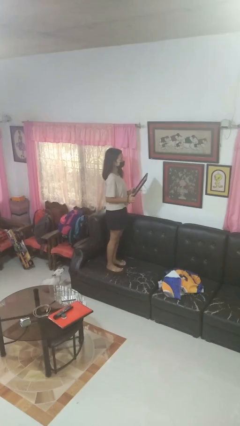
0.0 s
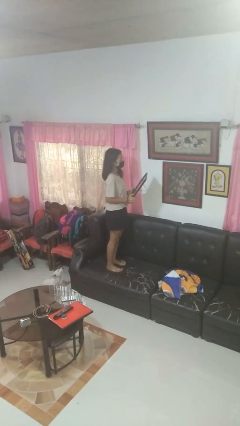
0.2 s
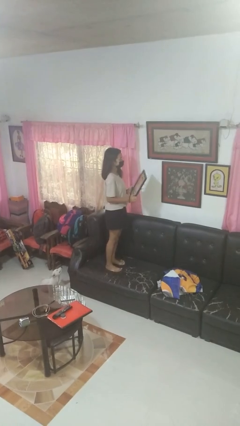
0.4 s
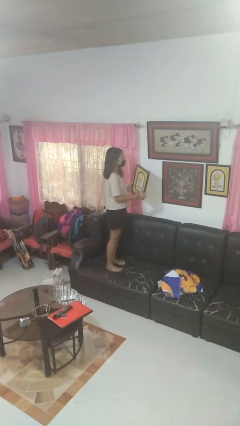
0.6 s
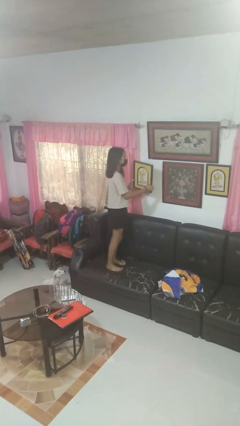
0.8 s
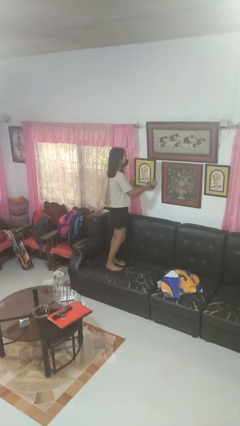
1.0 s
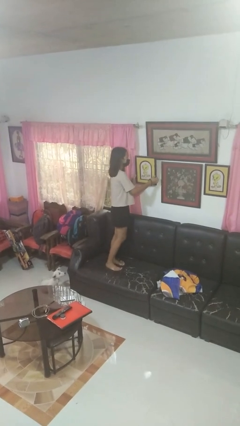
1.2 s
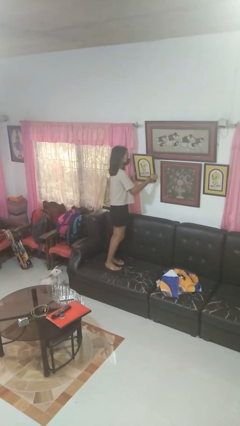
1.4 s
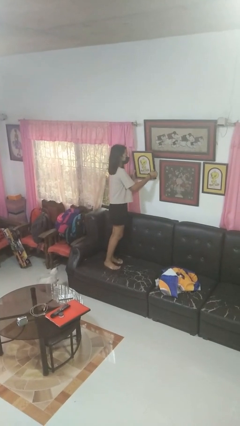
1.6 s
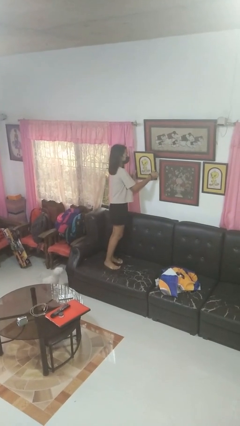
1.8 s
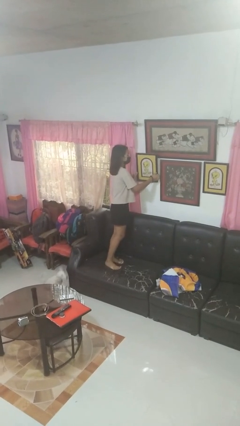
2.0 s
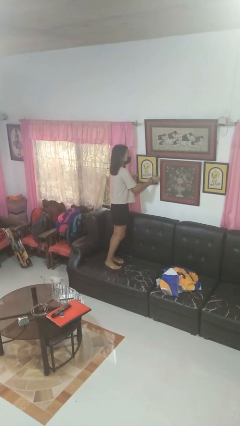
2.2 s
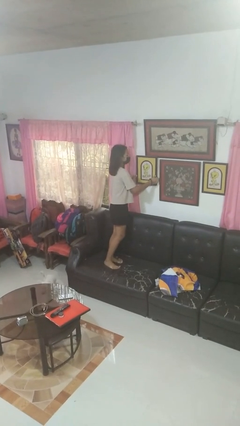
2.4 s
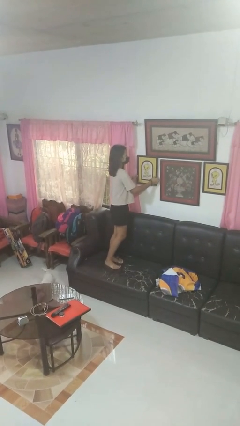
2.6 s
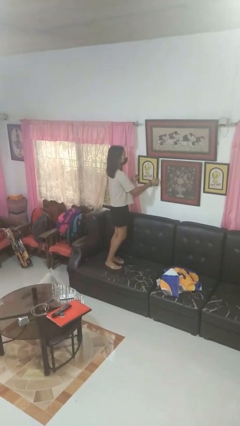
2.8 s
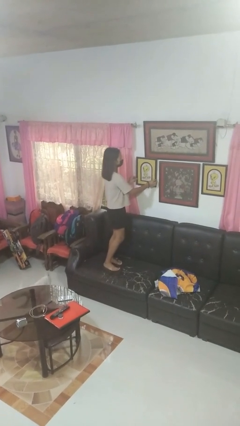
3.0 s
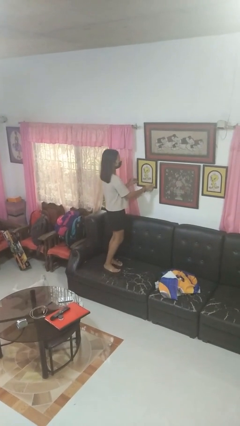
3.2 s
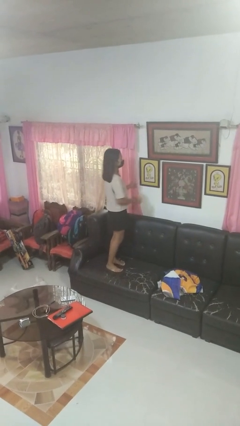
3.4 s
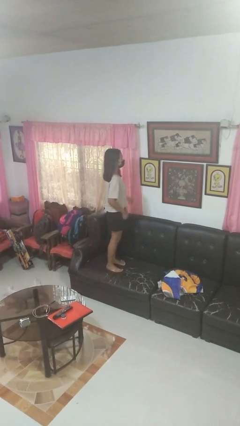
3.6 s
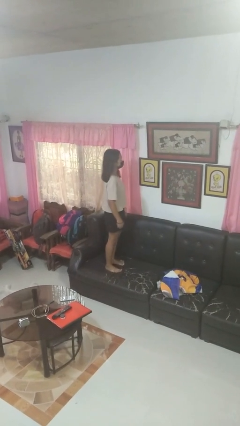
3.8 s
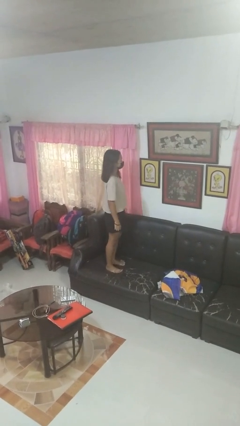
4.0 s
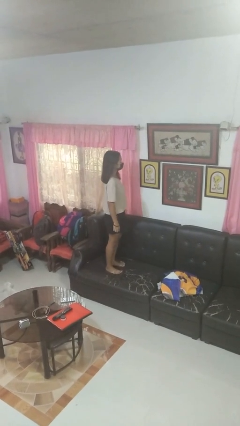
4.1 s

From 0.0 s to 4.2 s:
person puts up picture frame

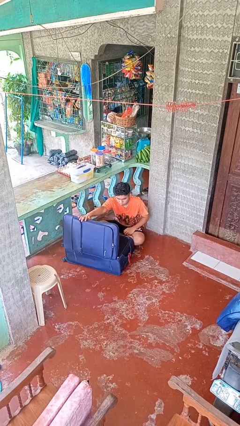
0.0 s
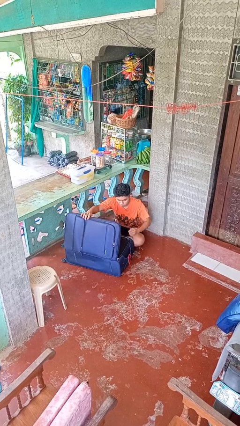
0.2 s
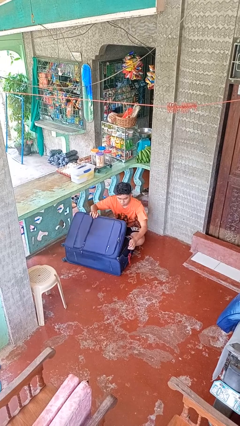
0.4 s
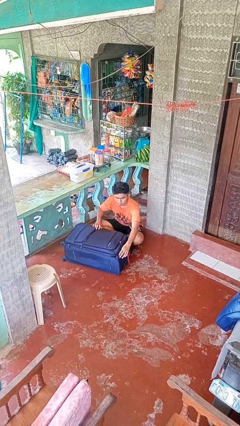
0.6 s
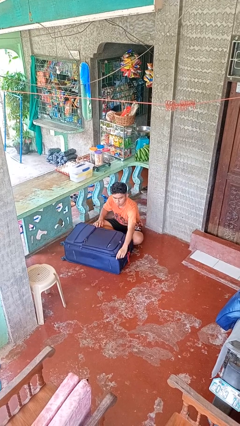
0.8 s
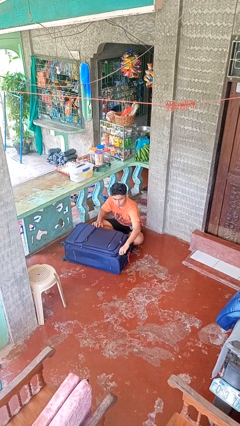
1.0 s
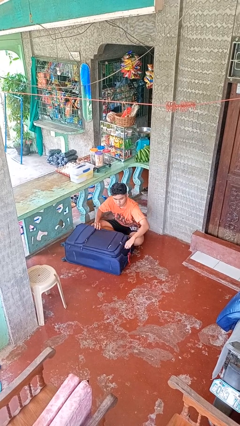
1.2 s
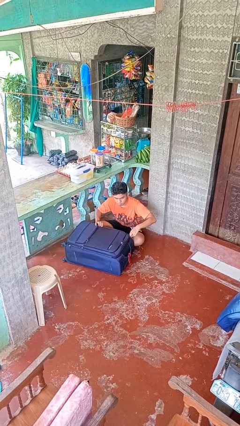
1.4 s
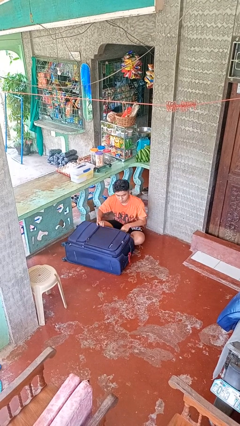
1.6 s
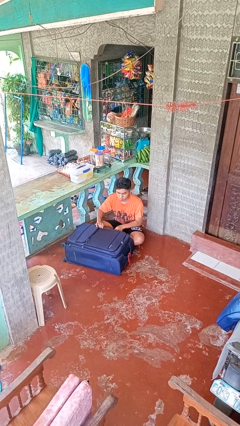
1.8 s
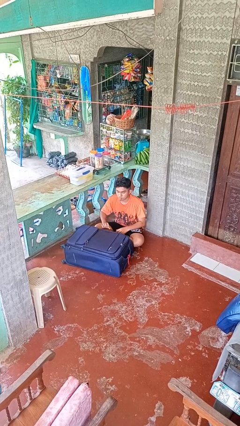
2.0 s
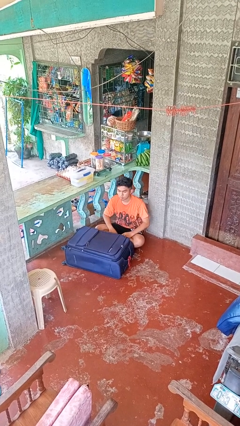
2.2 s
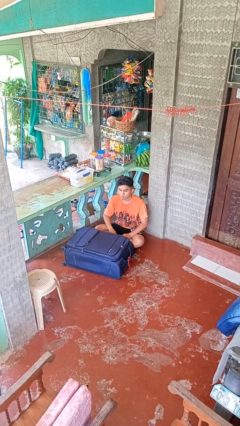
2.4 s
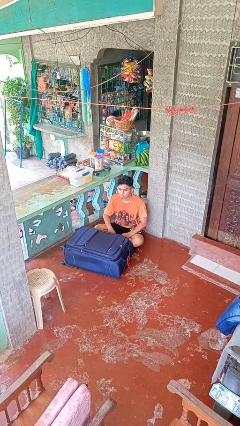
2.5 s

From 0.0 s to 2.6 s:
person closes suitcase

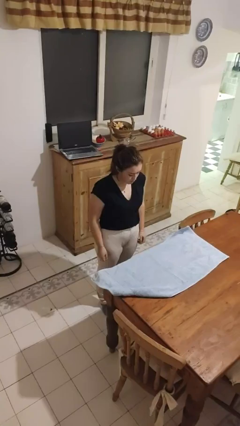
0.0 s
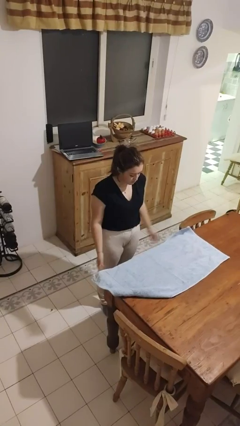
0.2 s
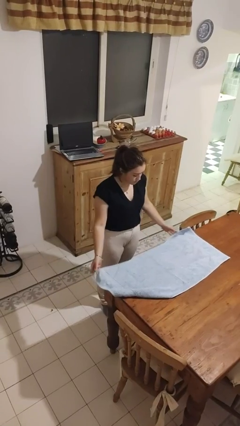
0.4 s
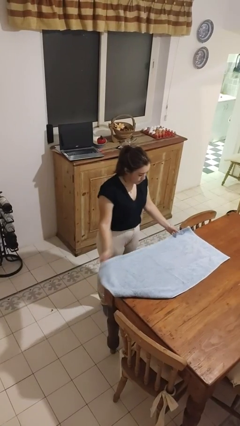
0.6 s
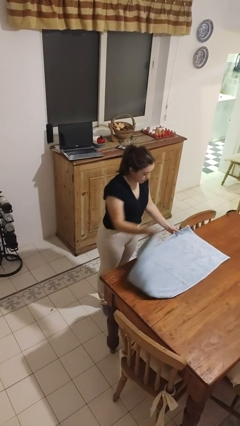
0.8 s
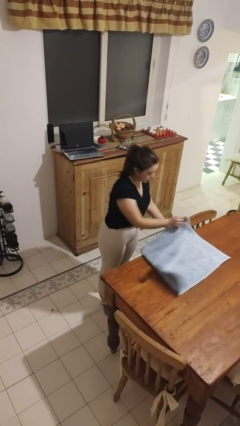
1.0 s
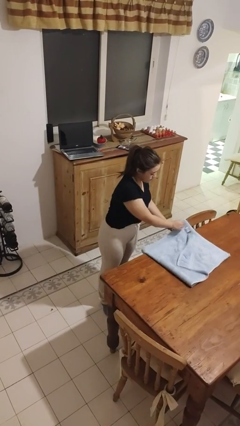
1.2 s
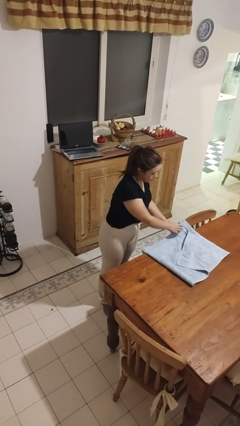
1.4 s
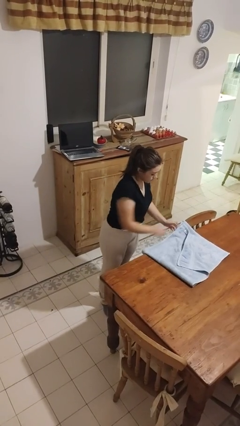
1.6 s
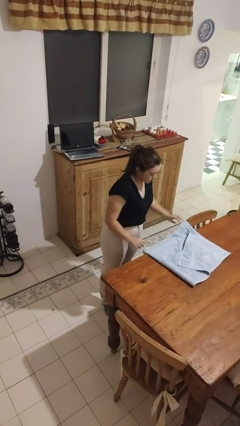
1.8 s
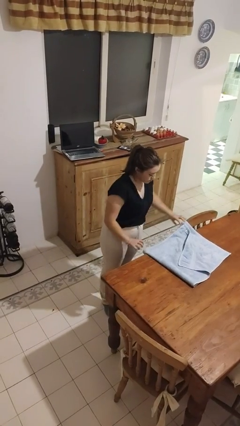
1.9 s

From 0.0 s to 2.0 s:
person folds tablecloth

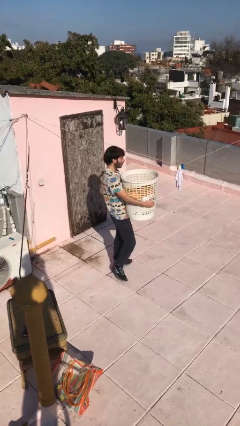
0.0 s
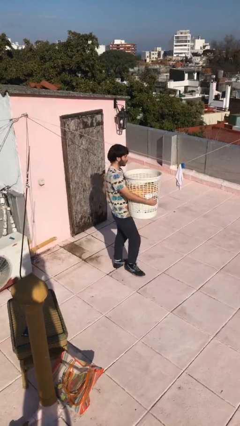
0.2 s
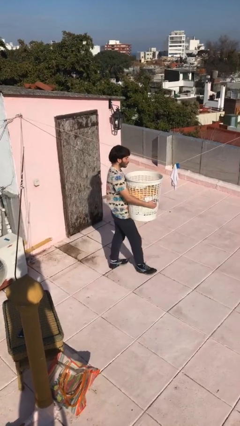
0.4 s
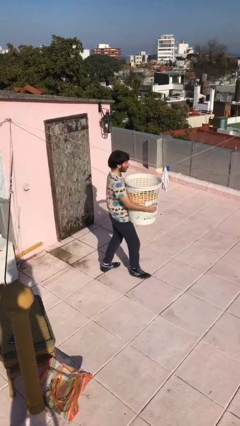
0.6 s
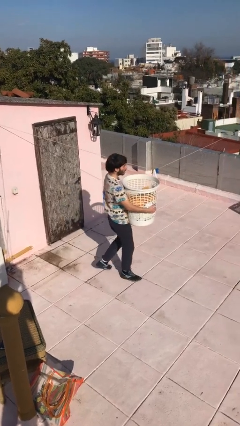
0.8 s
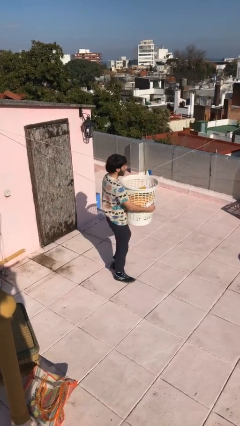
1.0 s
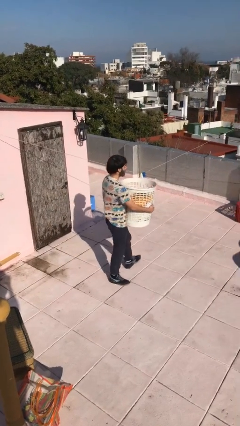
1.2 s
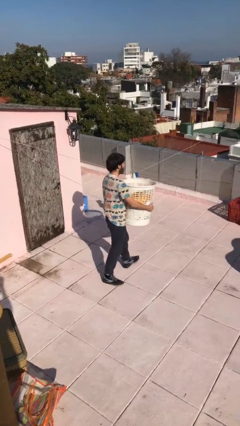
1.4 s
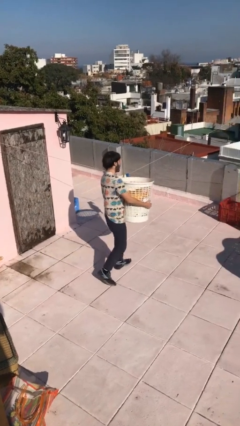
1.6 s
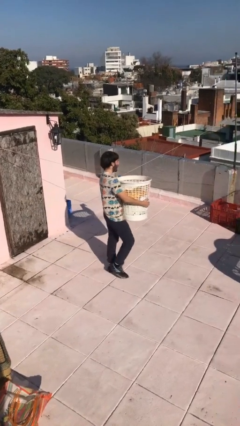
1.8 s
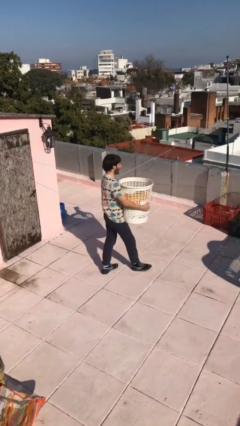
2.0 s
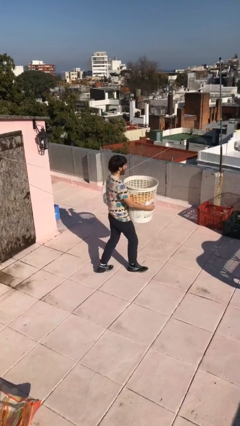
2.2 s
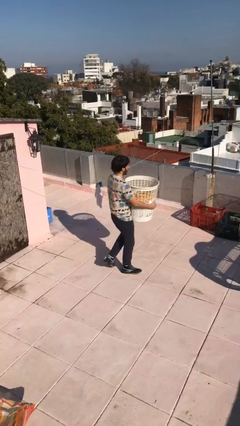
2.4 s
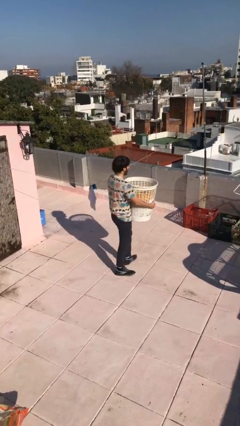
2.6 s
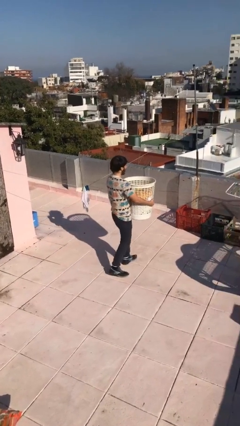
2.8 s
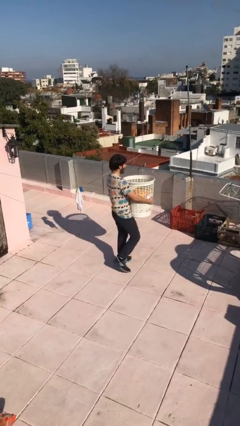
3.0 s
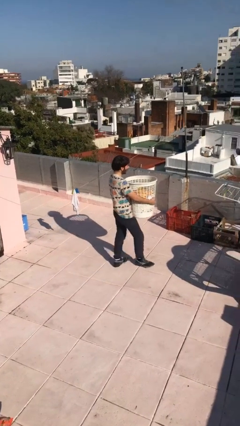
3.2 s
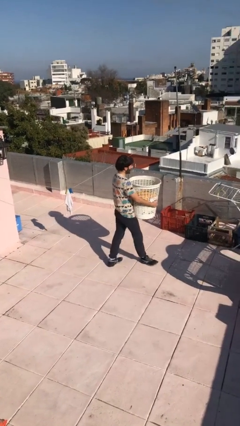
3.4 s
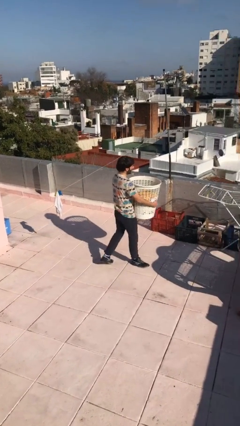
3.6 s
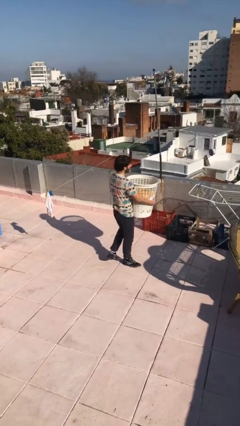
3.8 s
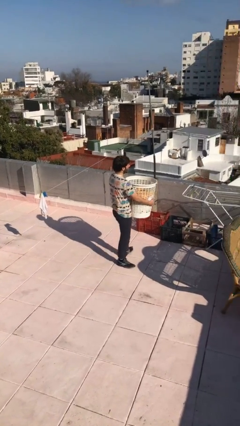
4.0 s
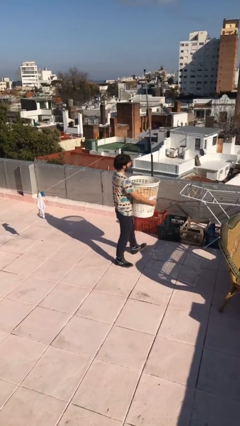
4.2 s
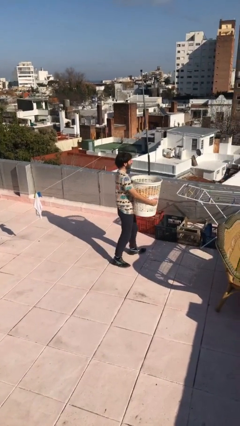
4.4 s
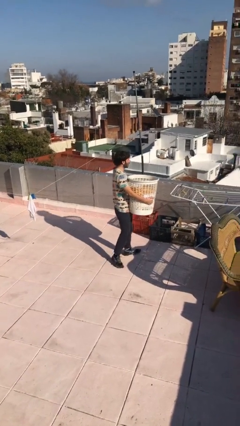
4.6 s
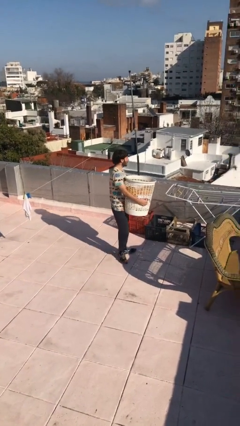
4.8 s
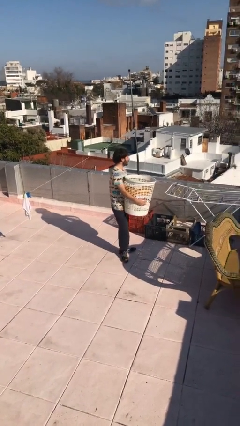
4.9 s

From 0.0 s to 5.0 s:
person carries laundry basket

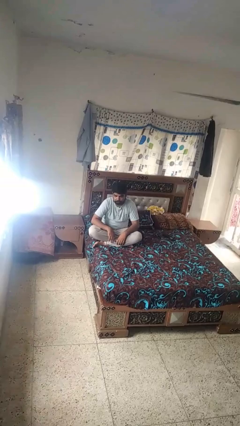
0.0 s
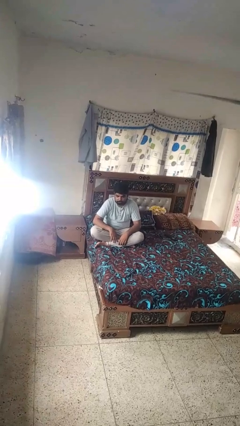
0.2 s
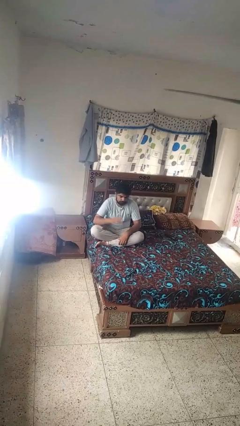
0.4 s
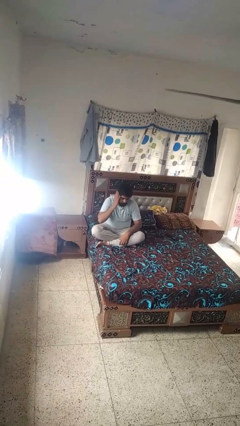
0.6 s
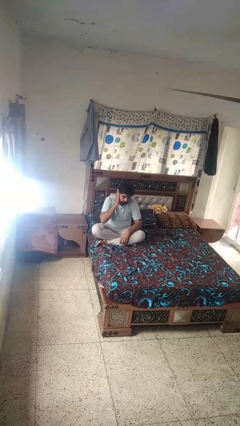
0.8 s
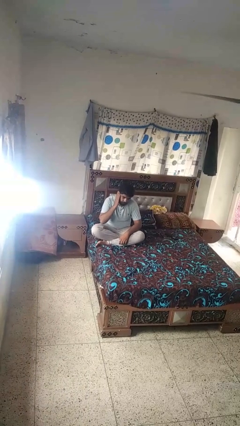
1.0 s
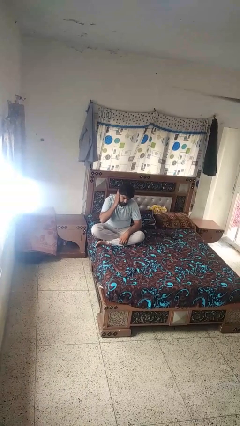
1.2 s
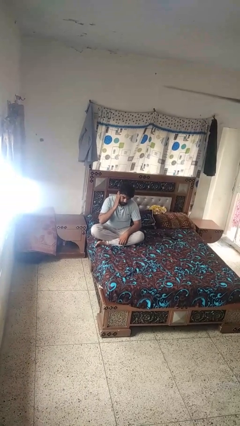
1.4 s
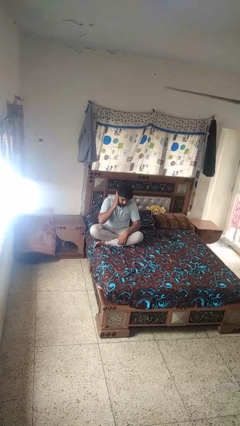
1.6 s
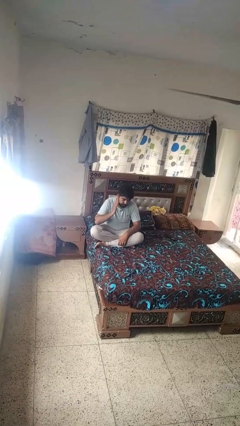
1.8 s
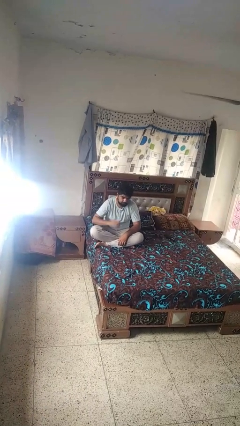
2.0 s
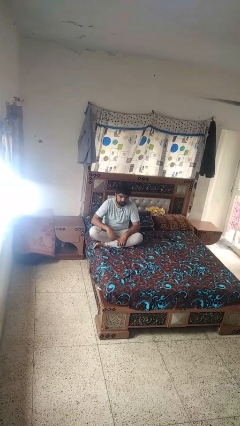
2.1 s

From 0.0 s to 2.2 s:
person scratches face

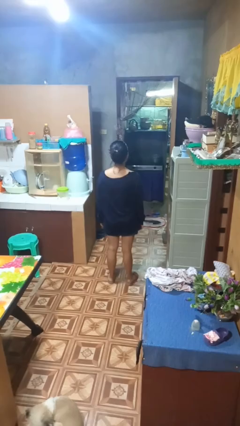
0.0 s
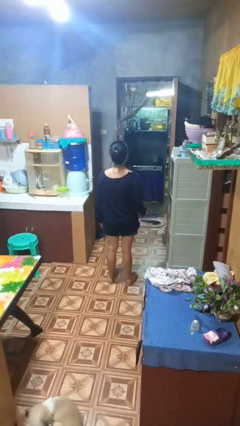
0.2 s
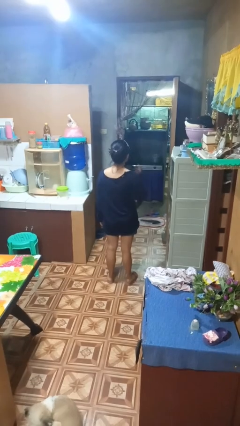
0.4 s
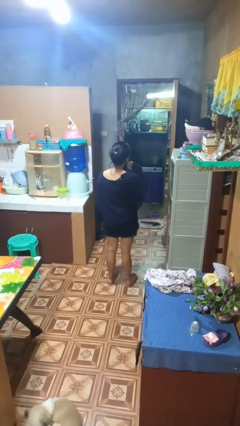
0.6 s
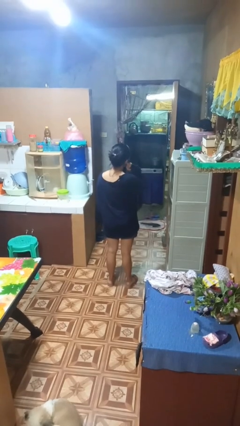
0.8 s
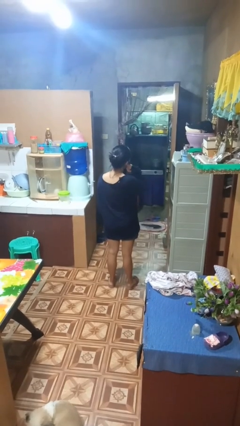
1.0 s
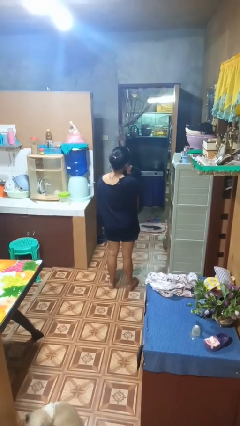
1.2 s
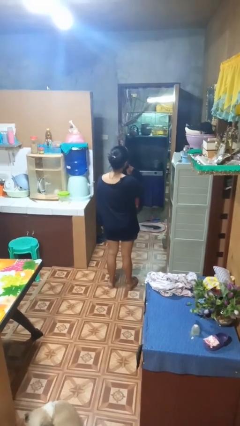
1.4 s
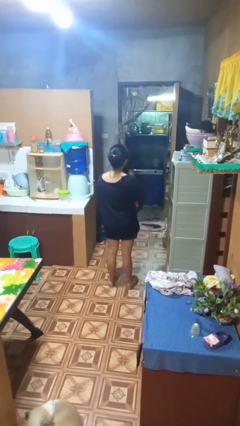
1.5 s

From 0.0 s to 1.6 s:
person gestures call me
